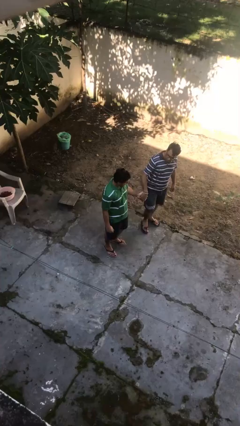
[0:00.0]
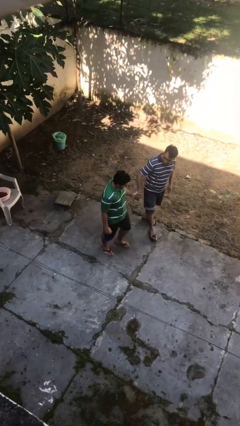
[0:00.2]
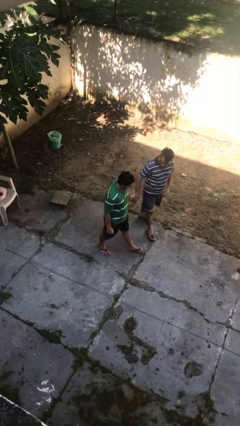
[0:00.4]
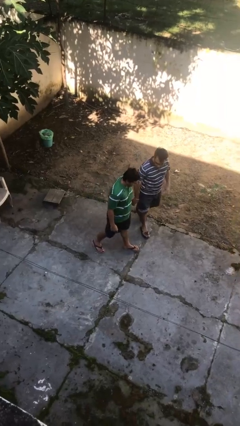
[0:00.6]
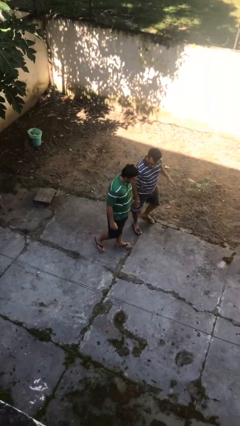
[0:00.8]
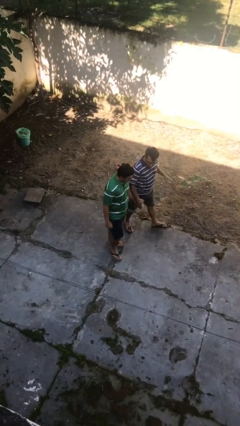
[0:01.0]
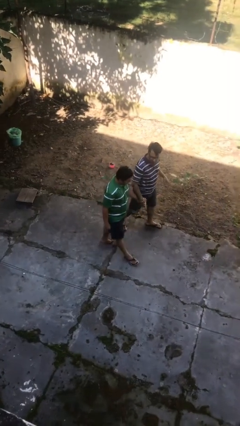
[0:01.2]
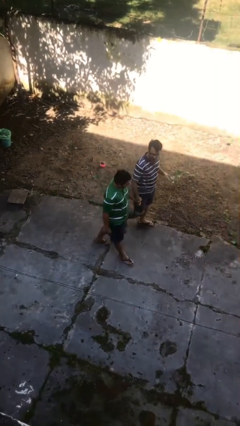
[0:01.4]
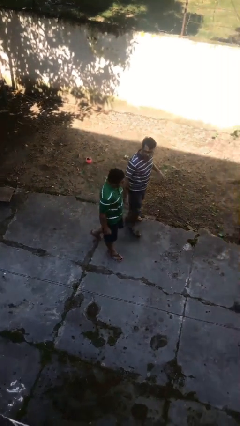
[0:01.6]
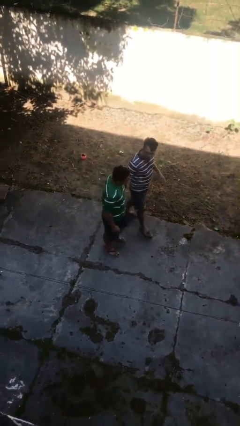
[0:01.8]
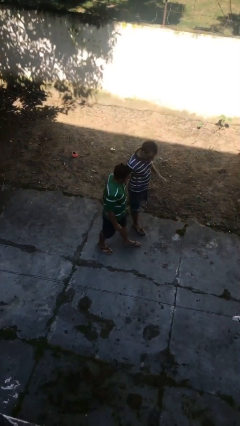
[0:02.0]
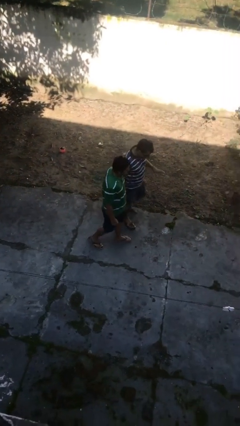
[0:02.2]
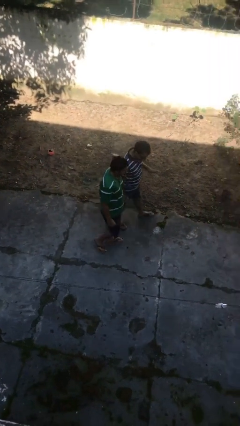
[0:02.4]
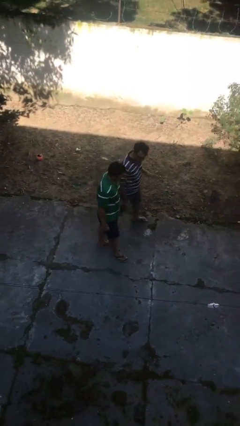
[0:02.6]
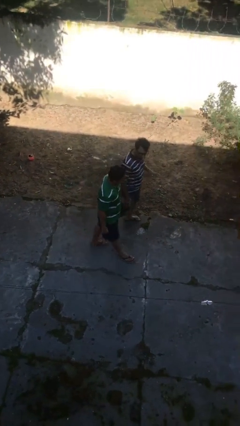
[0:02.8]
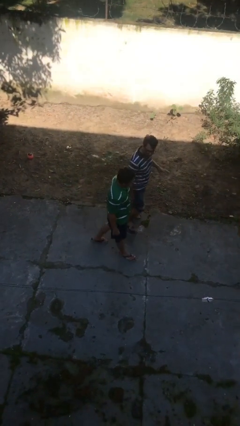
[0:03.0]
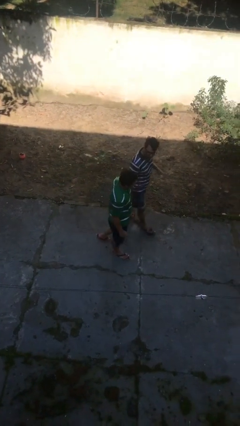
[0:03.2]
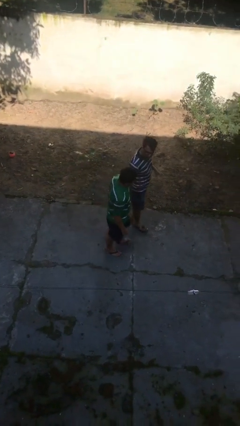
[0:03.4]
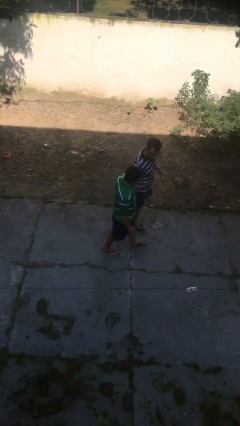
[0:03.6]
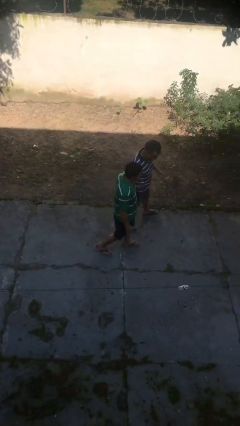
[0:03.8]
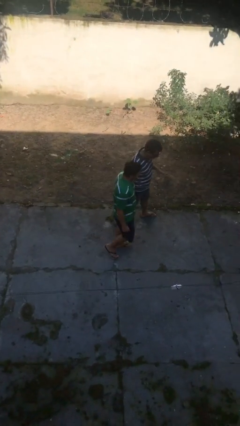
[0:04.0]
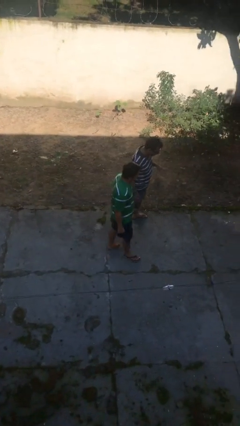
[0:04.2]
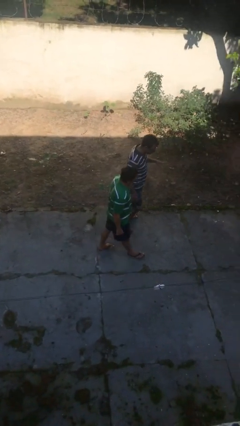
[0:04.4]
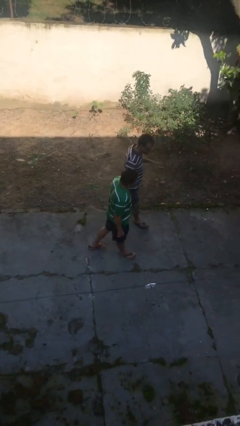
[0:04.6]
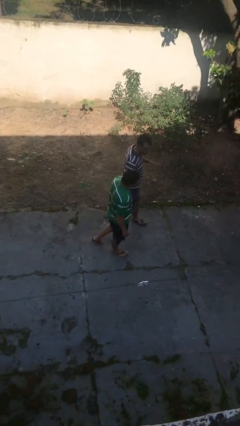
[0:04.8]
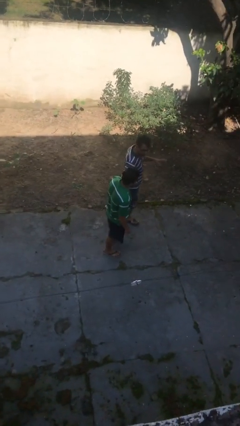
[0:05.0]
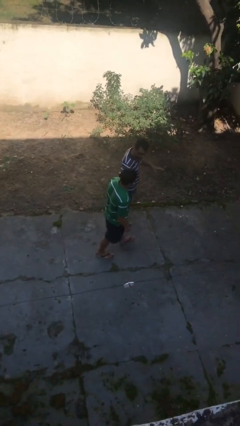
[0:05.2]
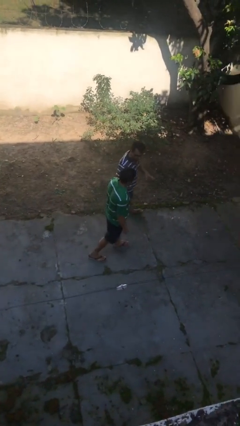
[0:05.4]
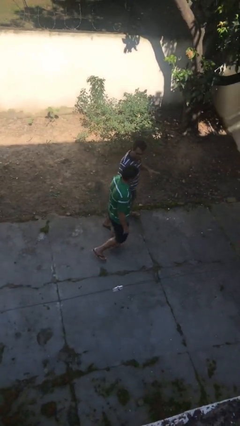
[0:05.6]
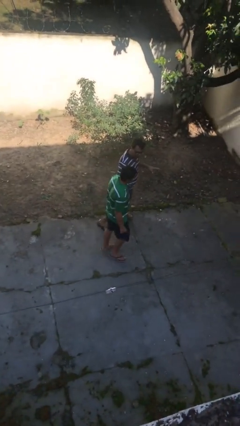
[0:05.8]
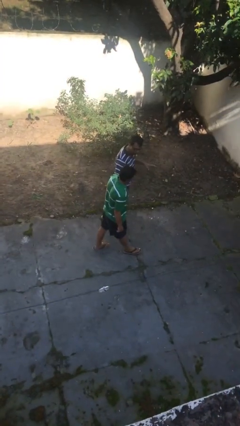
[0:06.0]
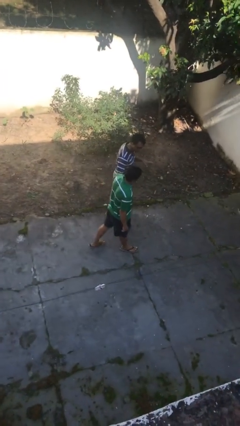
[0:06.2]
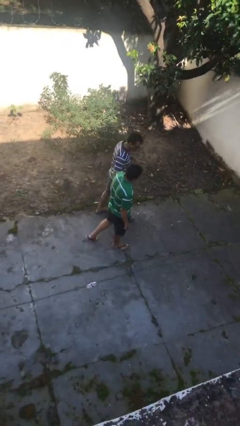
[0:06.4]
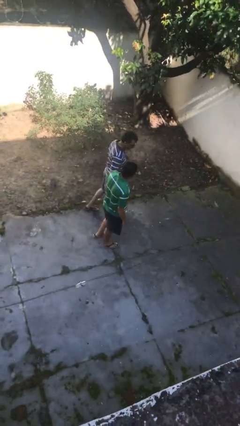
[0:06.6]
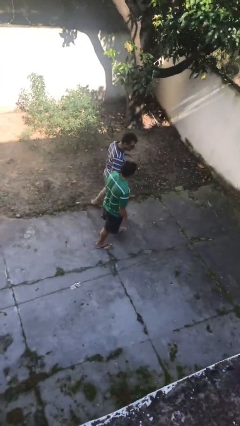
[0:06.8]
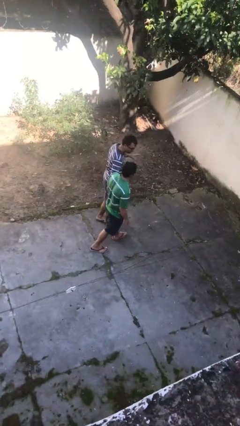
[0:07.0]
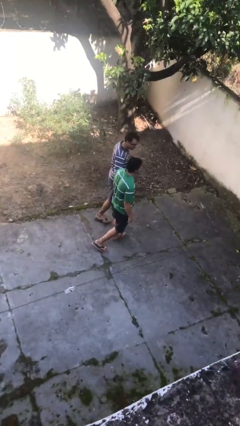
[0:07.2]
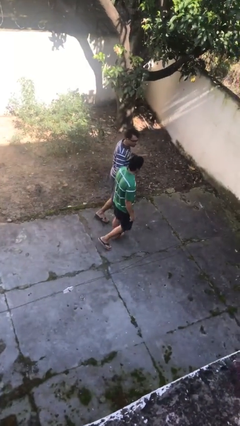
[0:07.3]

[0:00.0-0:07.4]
person holds hand

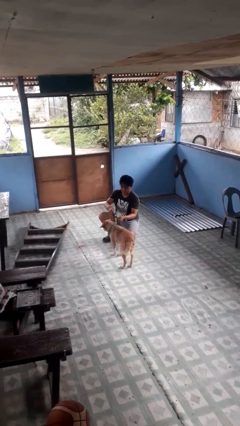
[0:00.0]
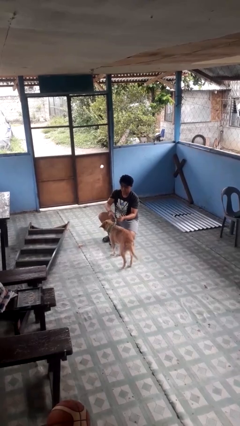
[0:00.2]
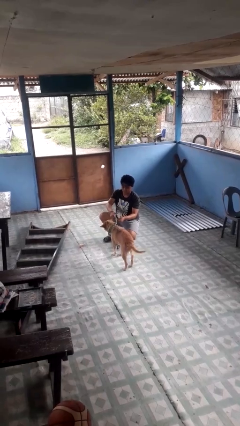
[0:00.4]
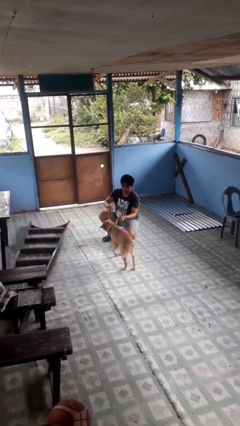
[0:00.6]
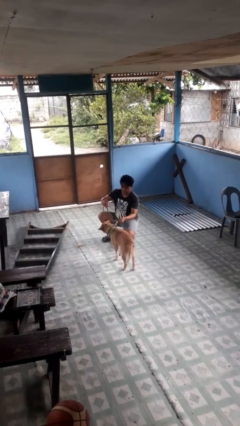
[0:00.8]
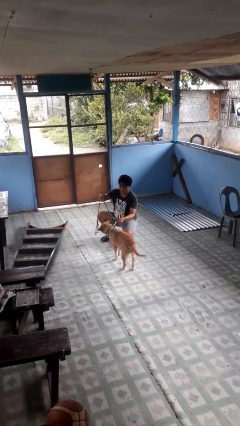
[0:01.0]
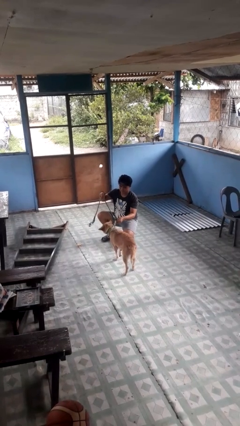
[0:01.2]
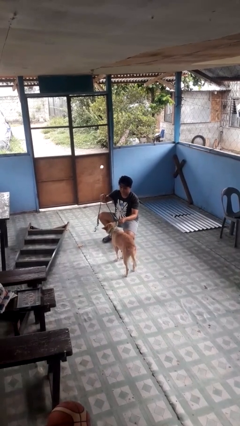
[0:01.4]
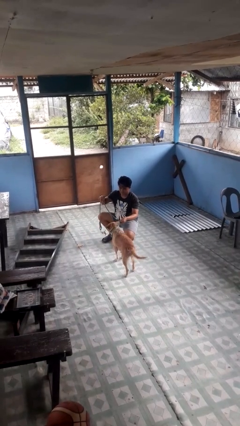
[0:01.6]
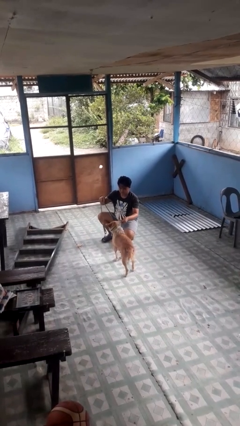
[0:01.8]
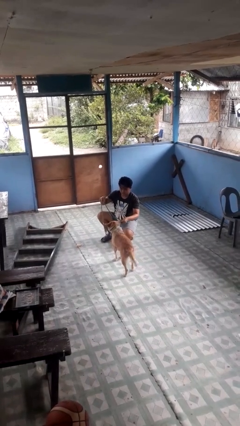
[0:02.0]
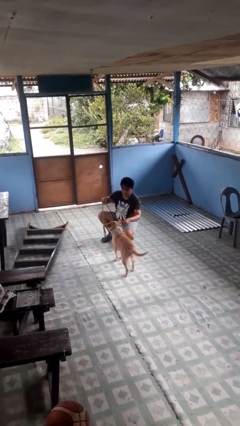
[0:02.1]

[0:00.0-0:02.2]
person attaches leash to dog

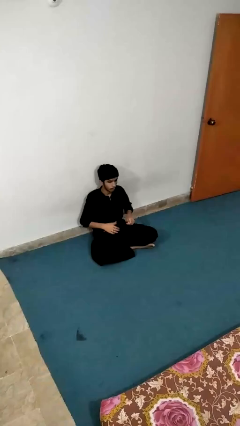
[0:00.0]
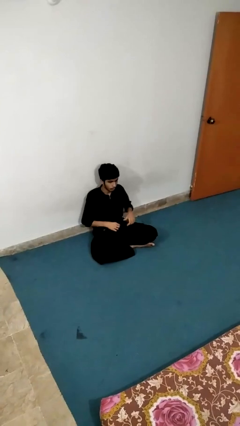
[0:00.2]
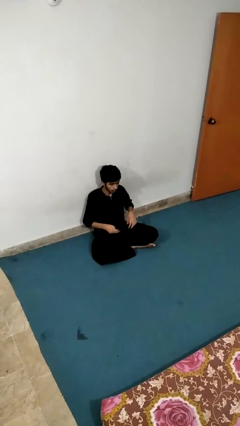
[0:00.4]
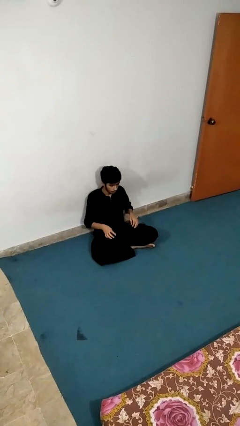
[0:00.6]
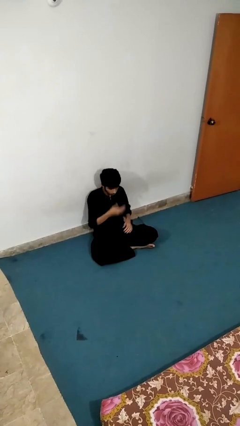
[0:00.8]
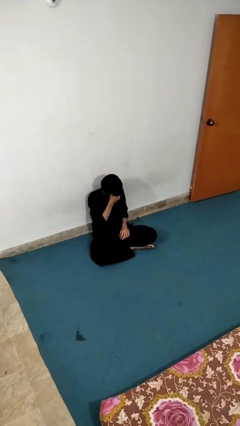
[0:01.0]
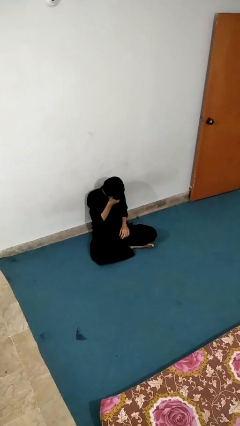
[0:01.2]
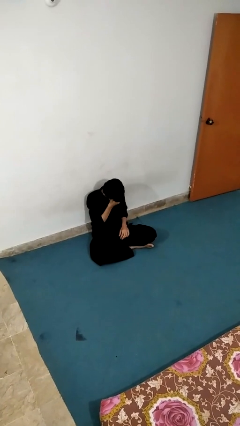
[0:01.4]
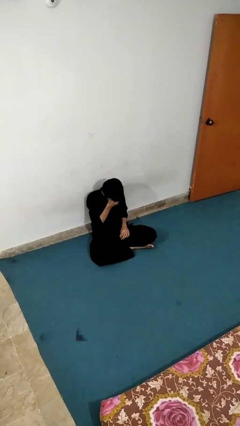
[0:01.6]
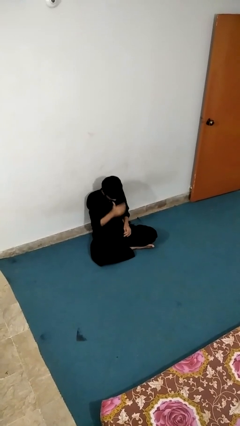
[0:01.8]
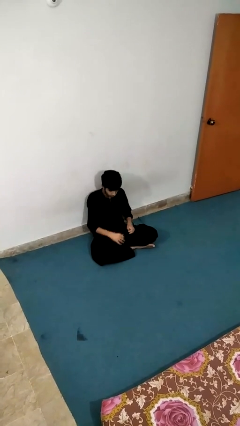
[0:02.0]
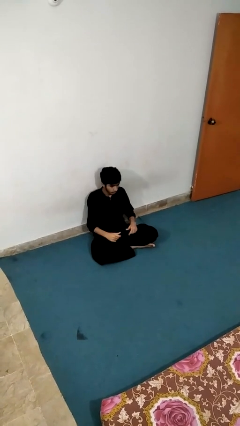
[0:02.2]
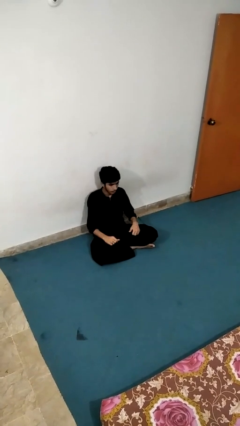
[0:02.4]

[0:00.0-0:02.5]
person covers face with hands

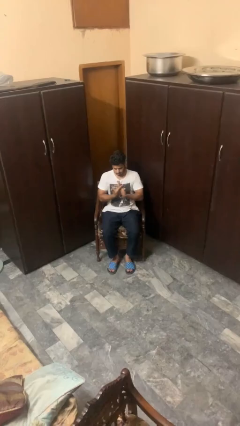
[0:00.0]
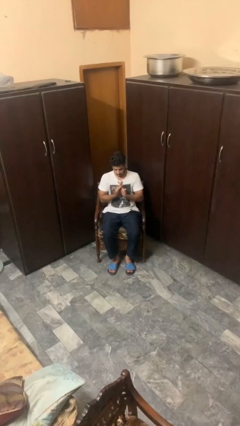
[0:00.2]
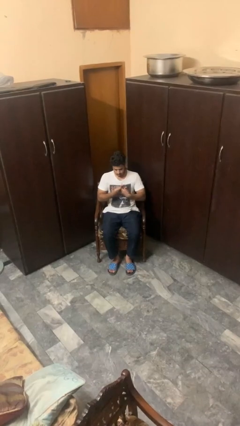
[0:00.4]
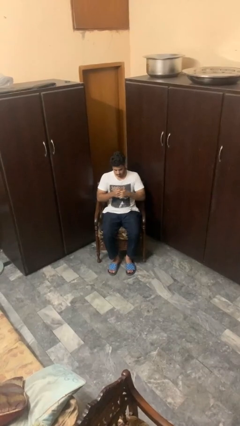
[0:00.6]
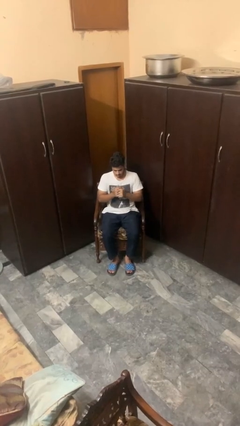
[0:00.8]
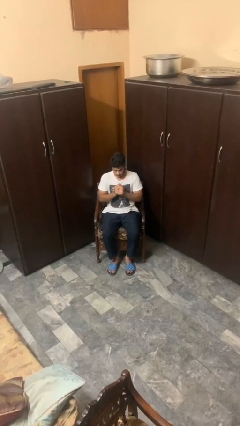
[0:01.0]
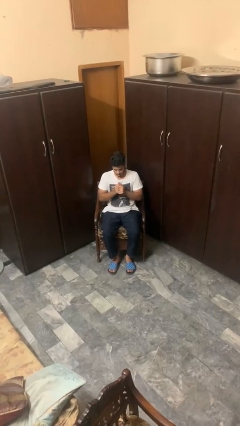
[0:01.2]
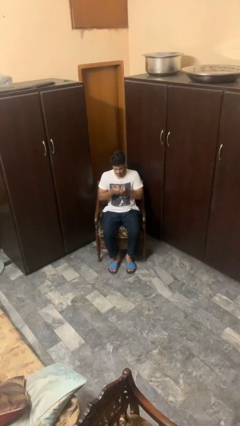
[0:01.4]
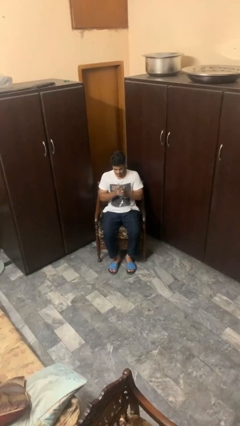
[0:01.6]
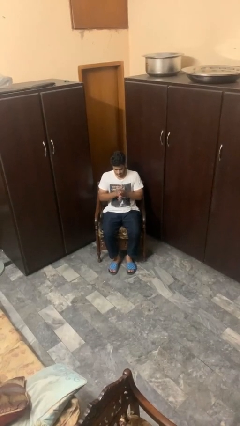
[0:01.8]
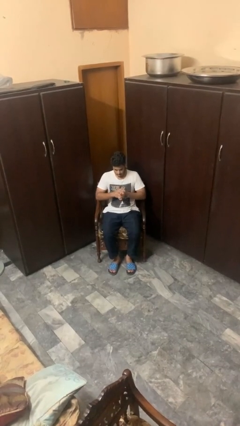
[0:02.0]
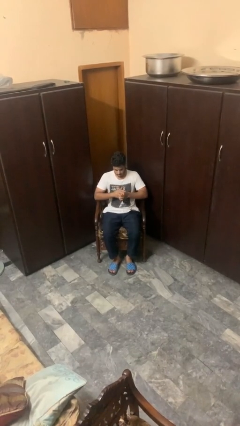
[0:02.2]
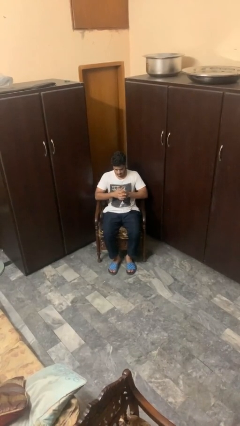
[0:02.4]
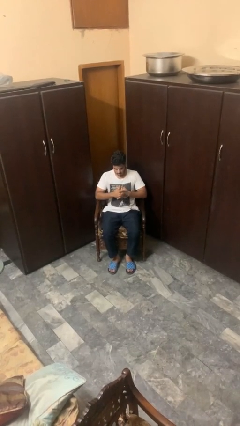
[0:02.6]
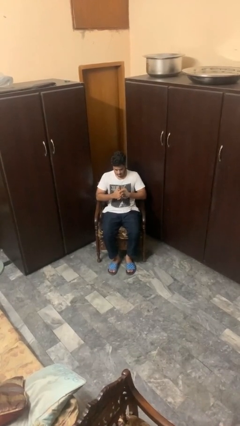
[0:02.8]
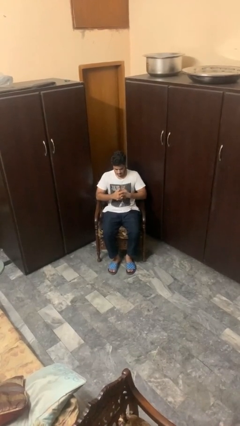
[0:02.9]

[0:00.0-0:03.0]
person cracks knuckles

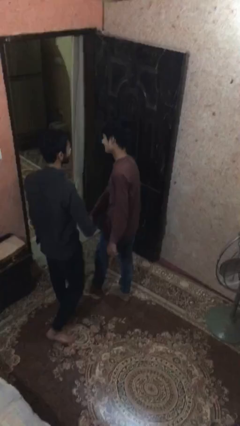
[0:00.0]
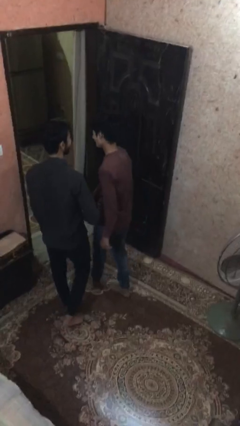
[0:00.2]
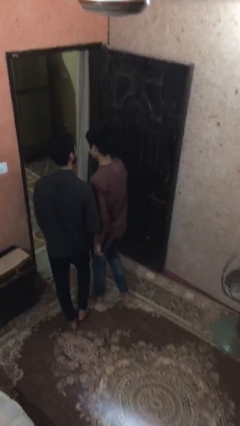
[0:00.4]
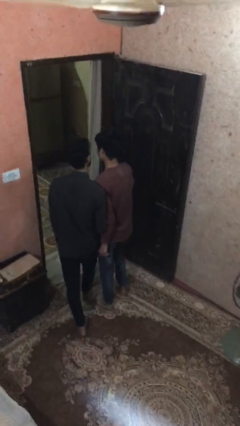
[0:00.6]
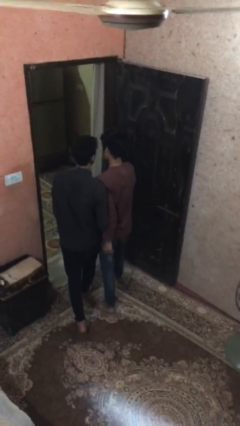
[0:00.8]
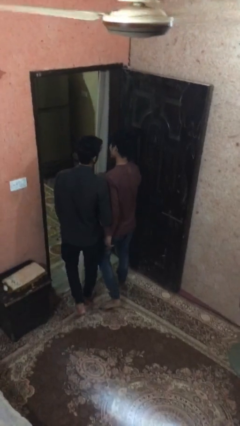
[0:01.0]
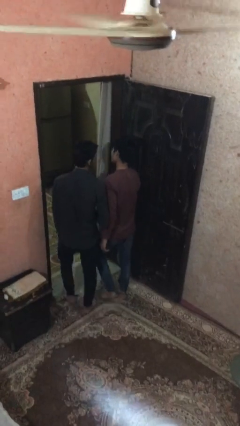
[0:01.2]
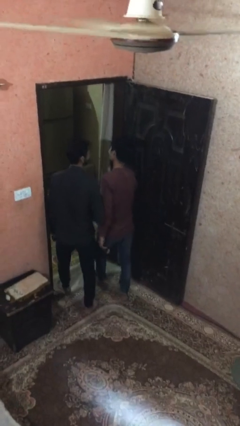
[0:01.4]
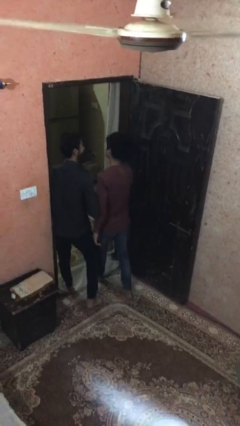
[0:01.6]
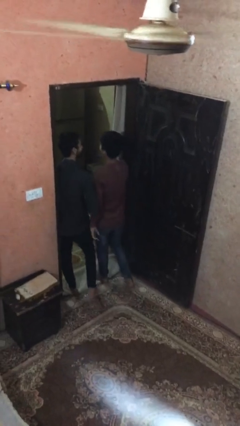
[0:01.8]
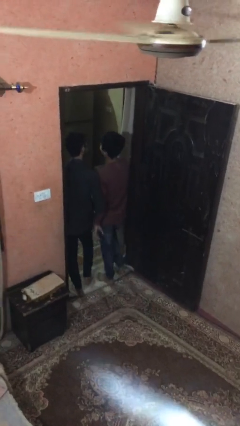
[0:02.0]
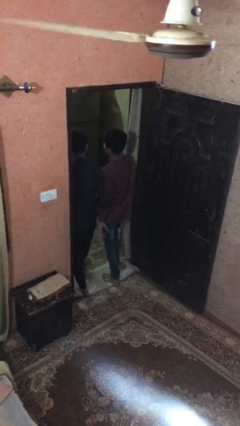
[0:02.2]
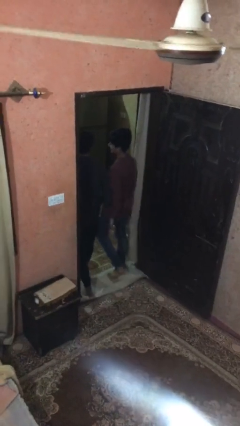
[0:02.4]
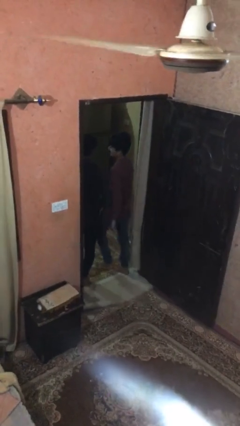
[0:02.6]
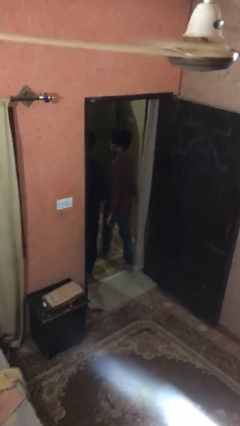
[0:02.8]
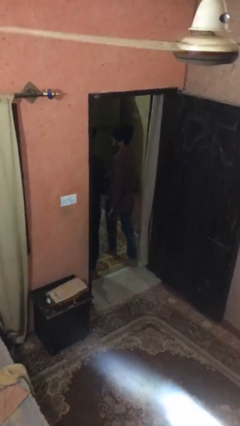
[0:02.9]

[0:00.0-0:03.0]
person talks to person
